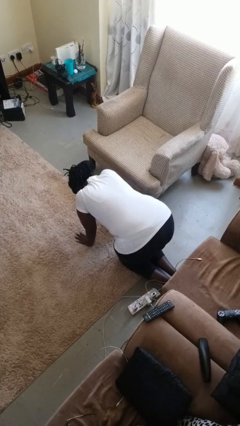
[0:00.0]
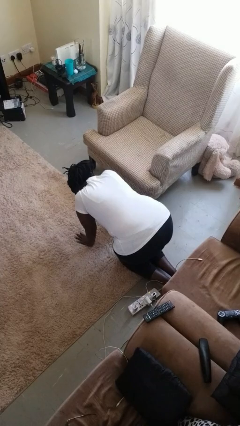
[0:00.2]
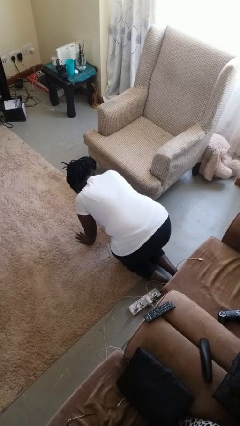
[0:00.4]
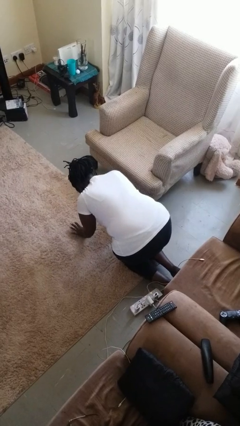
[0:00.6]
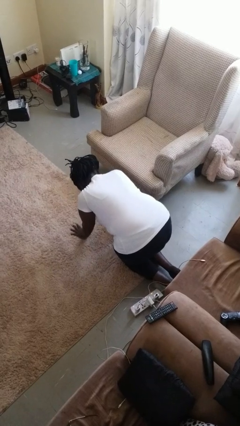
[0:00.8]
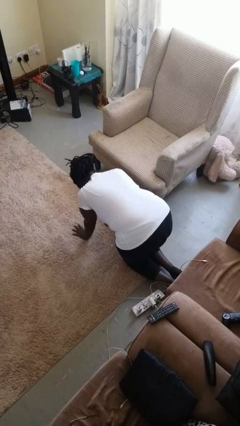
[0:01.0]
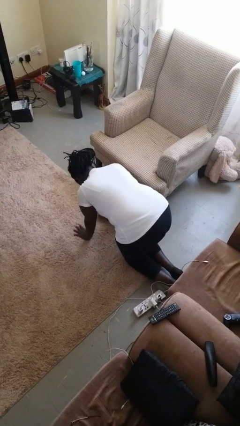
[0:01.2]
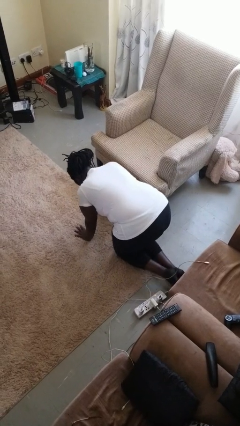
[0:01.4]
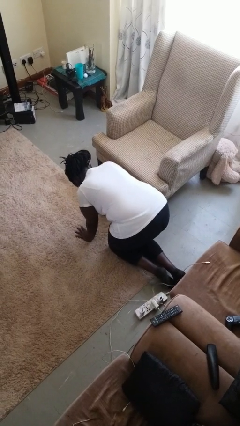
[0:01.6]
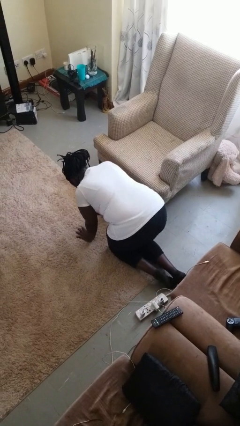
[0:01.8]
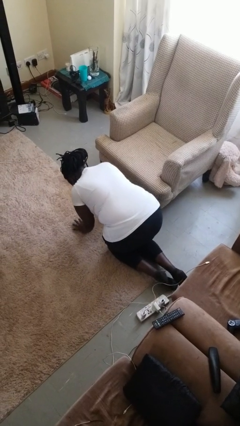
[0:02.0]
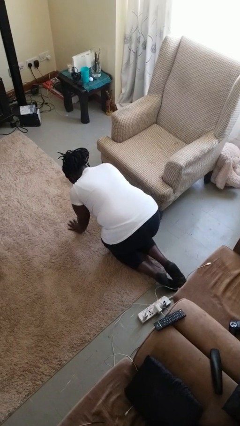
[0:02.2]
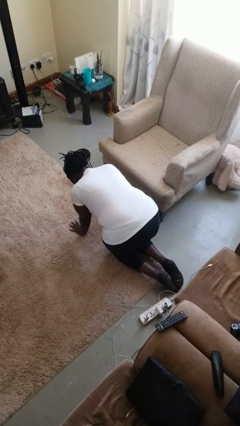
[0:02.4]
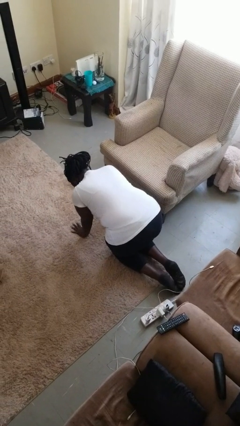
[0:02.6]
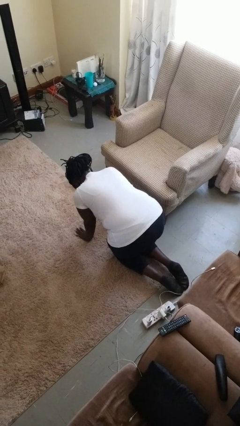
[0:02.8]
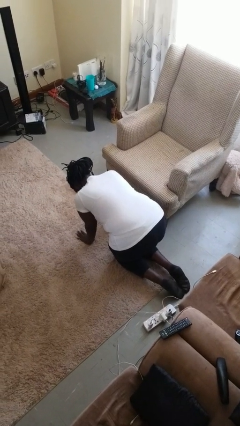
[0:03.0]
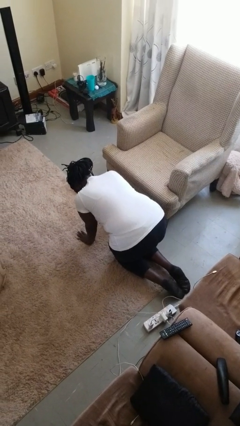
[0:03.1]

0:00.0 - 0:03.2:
person crawls

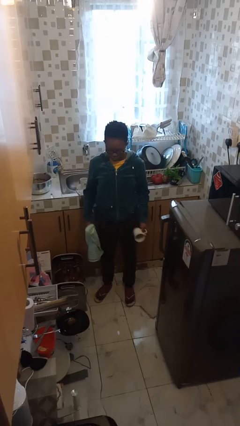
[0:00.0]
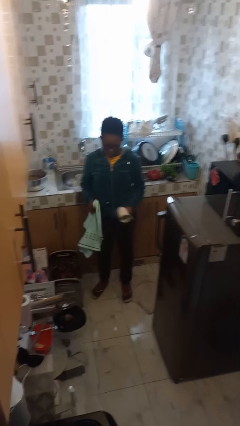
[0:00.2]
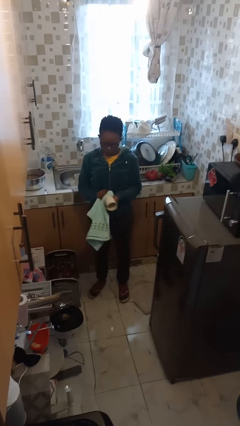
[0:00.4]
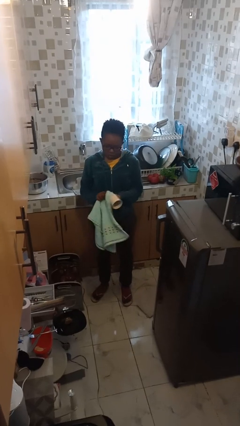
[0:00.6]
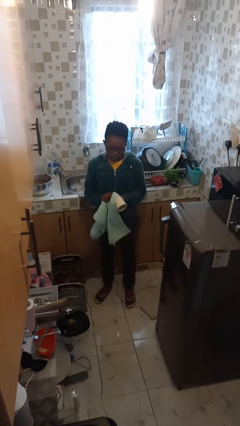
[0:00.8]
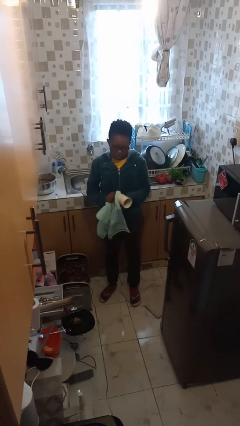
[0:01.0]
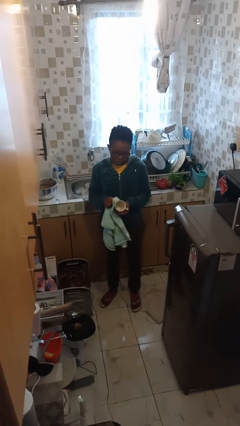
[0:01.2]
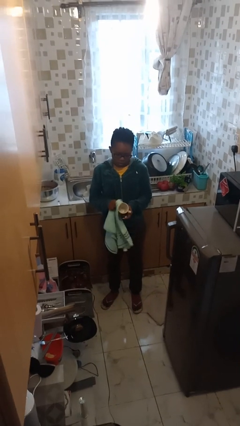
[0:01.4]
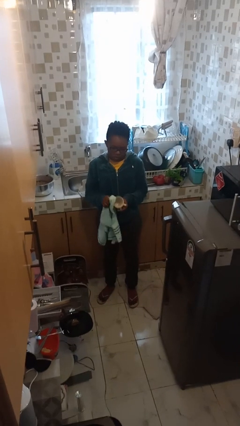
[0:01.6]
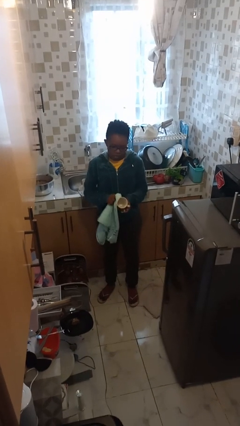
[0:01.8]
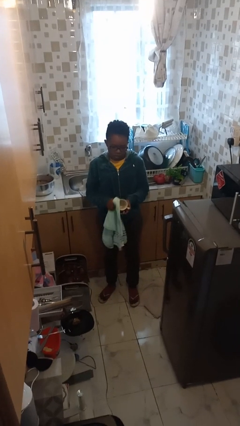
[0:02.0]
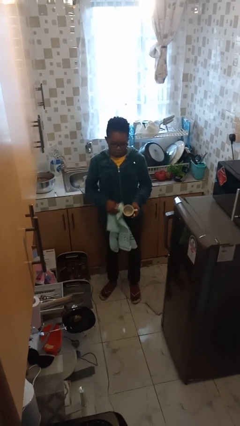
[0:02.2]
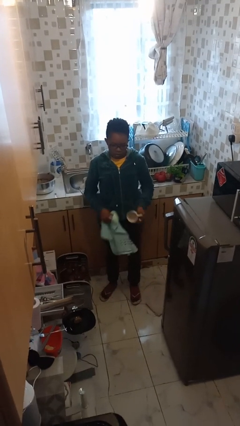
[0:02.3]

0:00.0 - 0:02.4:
person dries dish

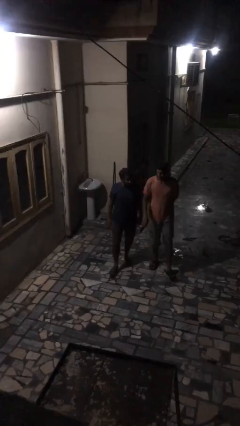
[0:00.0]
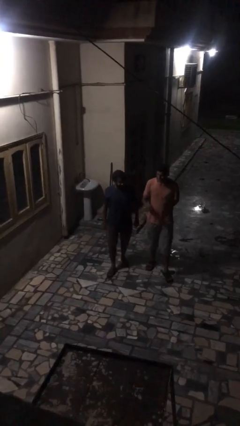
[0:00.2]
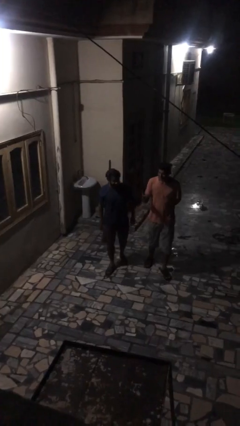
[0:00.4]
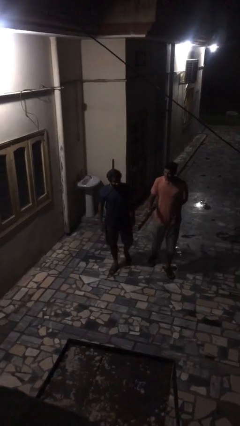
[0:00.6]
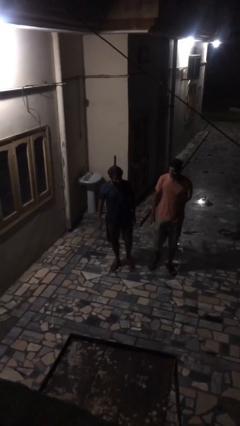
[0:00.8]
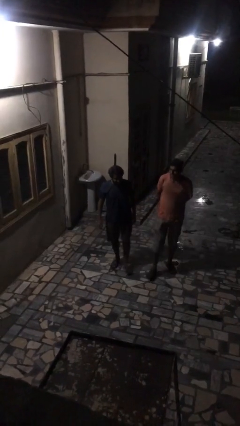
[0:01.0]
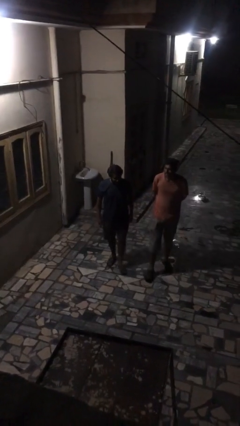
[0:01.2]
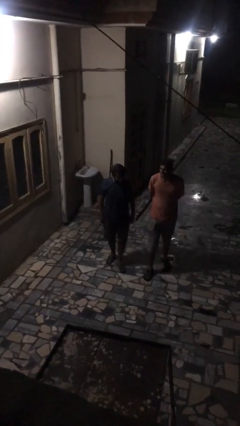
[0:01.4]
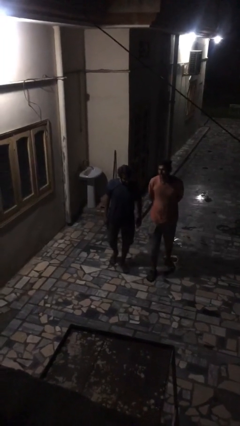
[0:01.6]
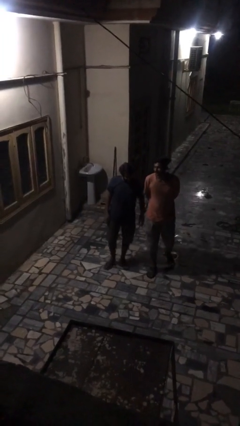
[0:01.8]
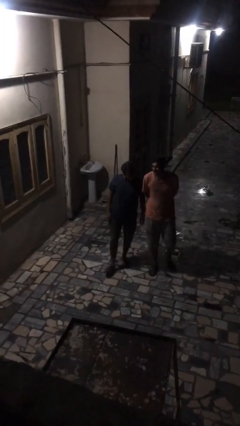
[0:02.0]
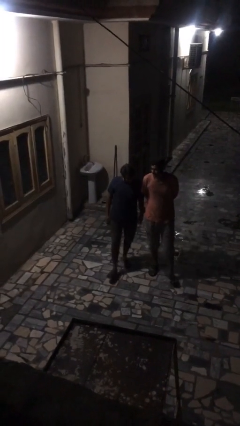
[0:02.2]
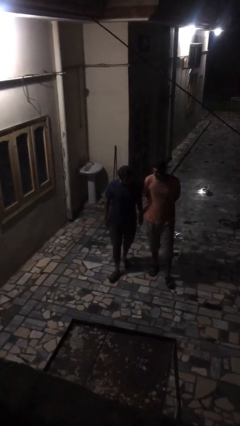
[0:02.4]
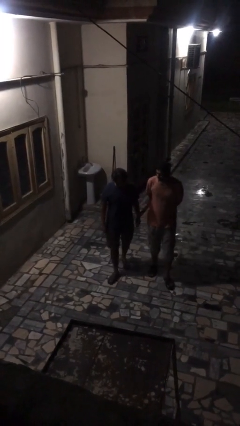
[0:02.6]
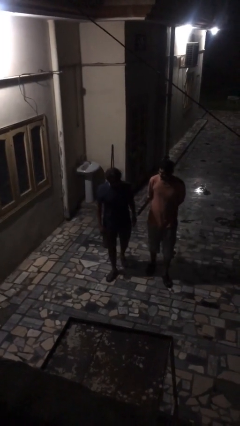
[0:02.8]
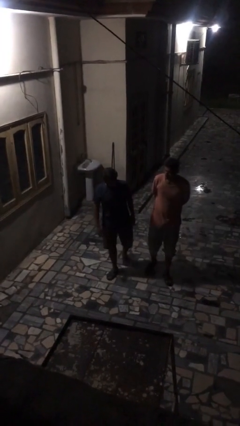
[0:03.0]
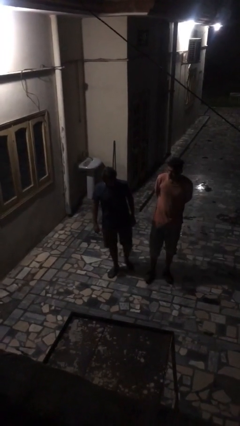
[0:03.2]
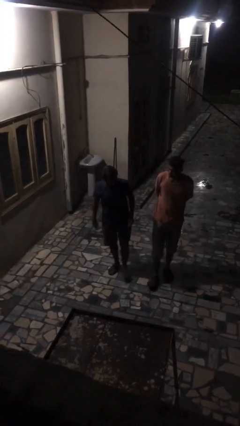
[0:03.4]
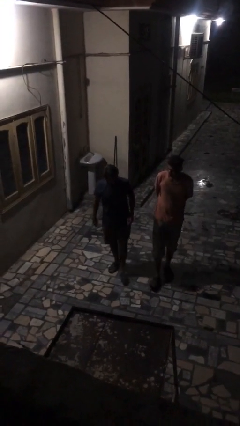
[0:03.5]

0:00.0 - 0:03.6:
person talks to person

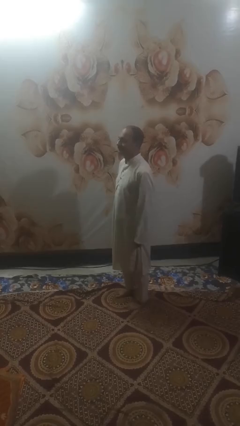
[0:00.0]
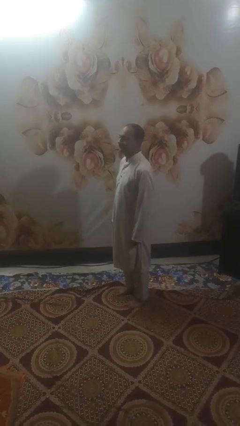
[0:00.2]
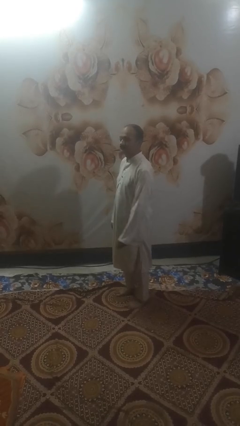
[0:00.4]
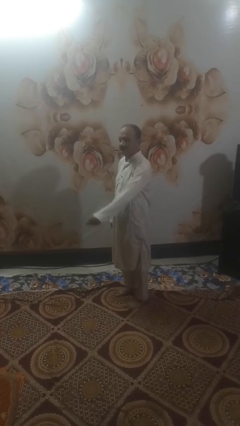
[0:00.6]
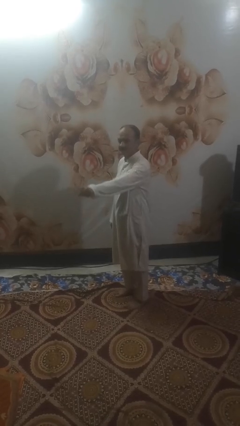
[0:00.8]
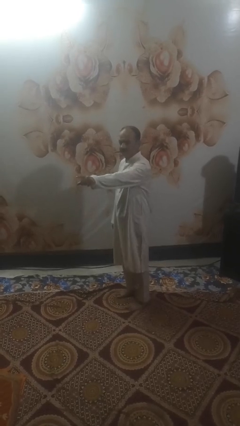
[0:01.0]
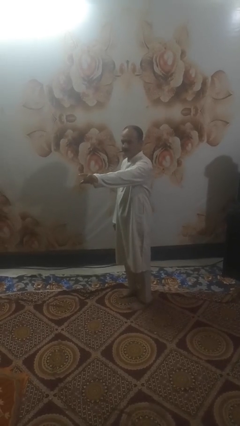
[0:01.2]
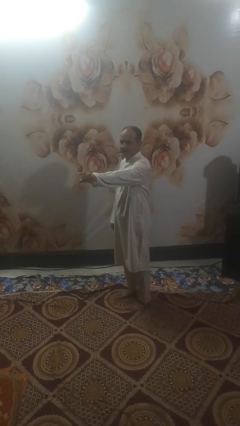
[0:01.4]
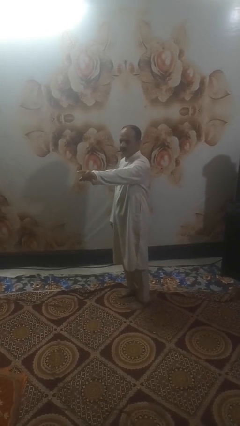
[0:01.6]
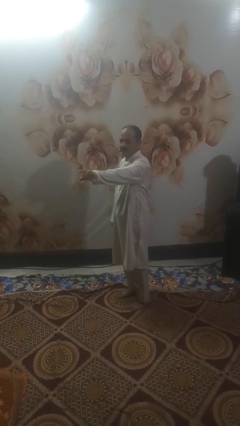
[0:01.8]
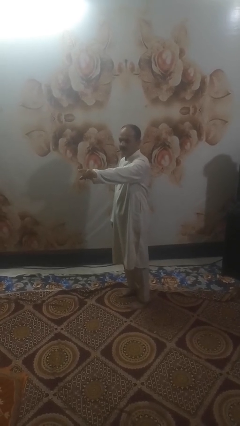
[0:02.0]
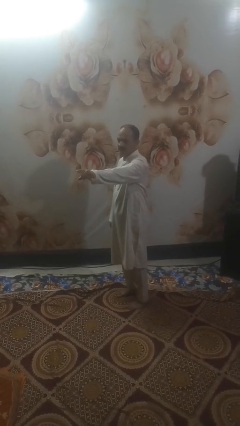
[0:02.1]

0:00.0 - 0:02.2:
person points at person

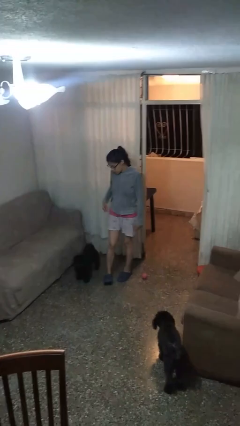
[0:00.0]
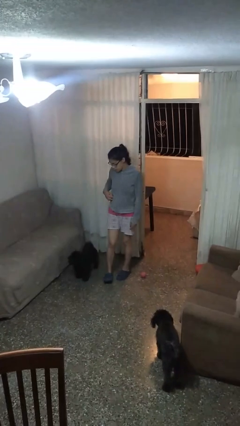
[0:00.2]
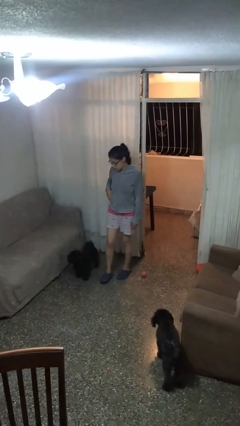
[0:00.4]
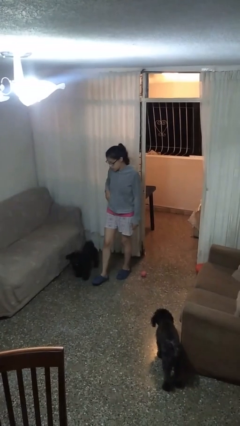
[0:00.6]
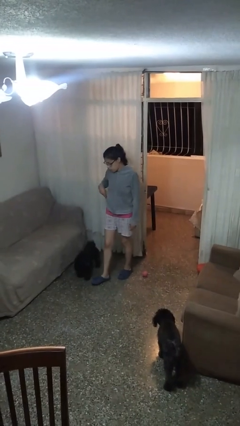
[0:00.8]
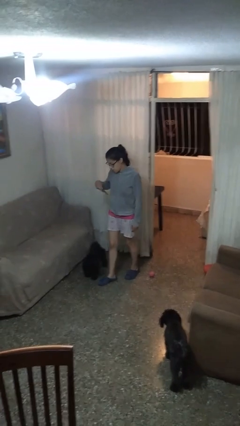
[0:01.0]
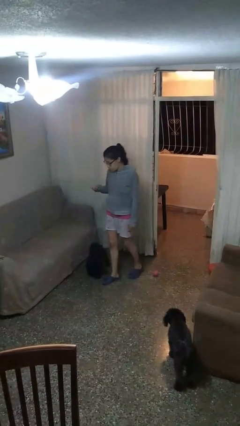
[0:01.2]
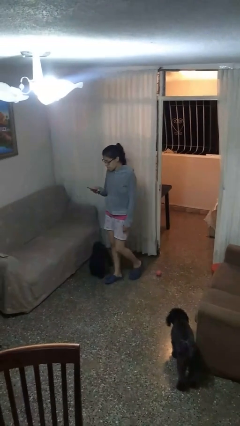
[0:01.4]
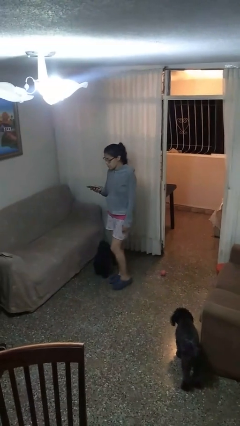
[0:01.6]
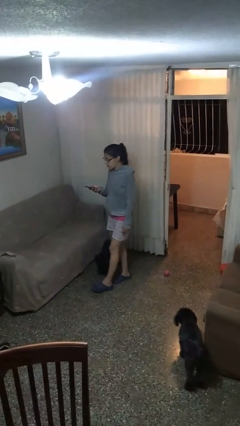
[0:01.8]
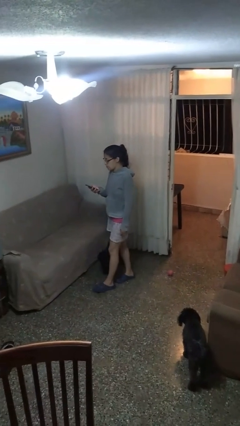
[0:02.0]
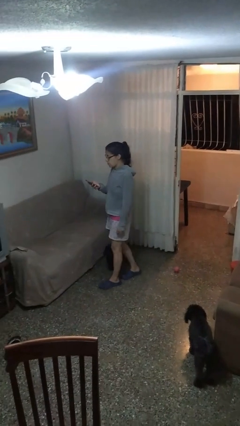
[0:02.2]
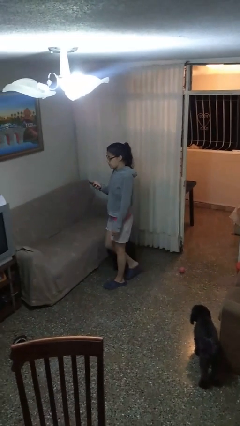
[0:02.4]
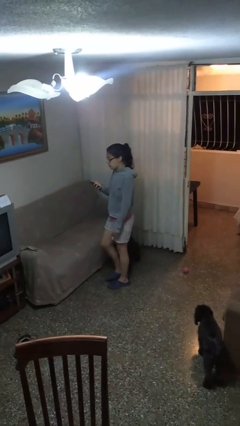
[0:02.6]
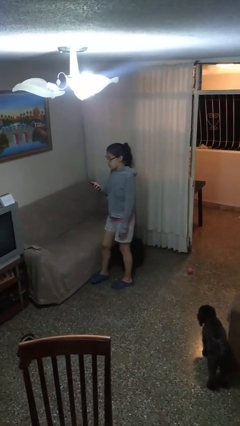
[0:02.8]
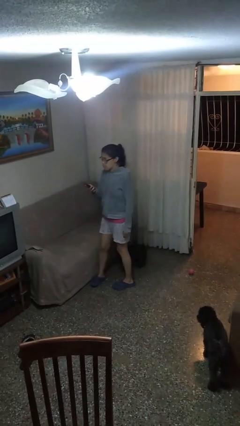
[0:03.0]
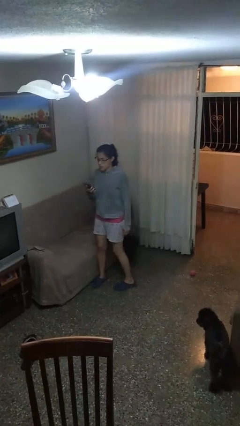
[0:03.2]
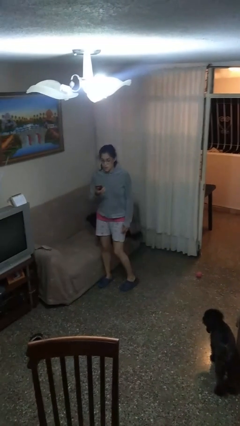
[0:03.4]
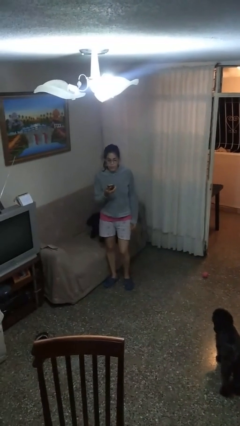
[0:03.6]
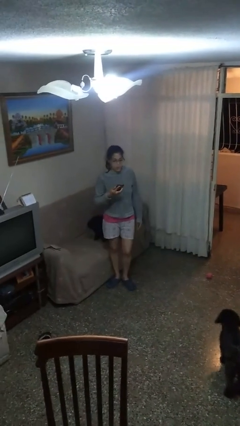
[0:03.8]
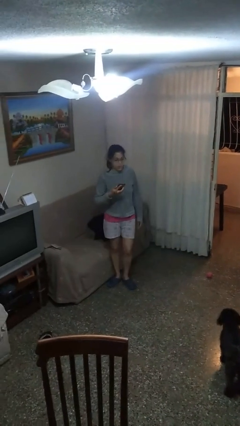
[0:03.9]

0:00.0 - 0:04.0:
person takes phone from pocket

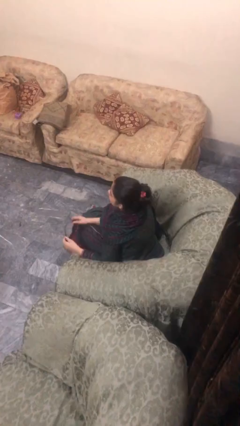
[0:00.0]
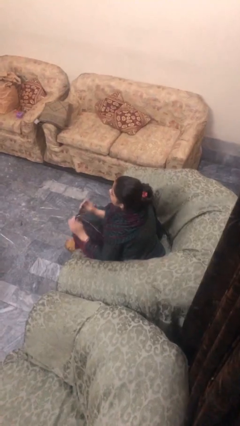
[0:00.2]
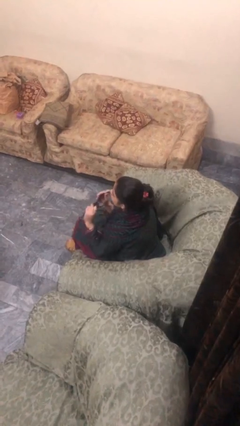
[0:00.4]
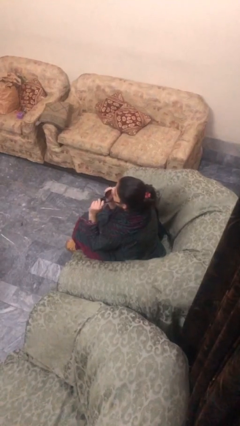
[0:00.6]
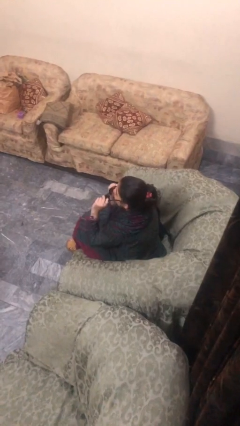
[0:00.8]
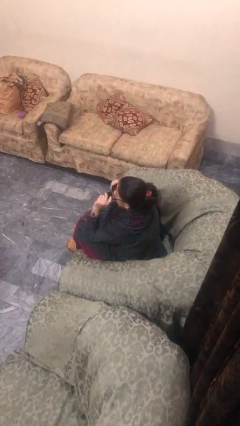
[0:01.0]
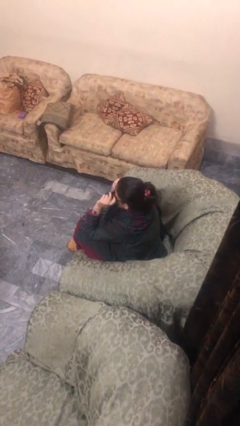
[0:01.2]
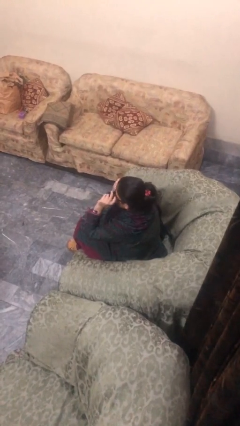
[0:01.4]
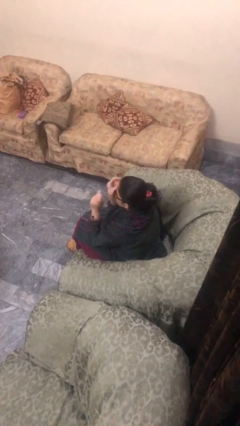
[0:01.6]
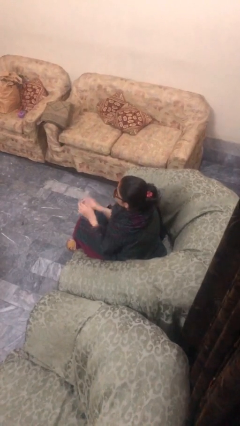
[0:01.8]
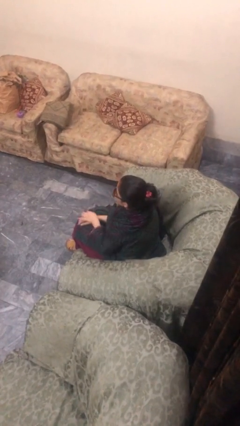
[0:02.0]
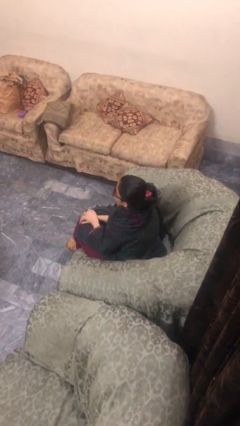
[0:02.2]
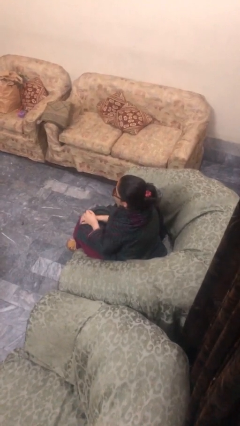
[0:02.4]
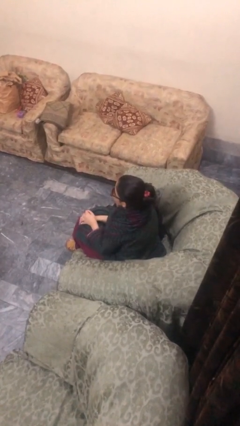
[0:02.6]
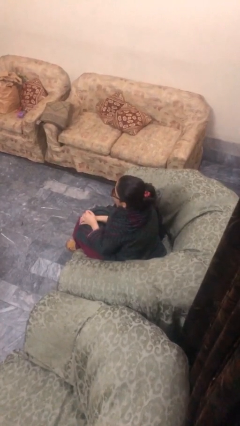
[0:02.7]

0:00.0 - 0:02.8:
person puts on sunglasses
